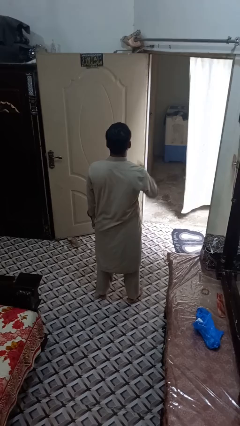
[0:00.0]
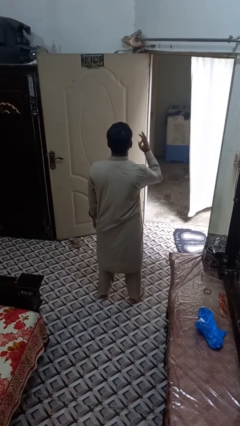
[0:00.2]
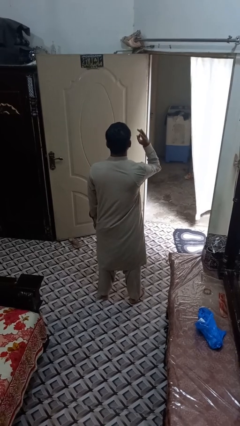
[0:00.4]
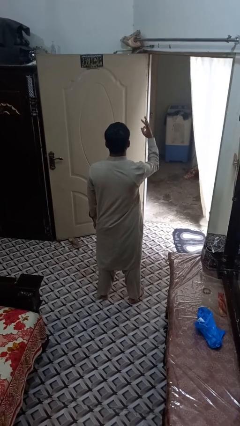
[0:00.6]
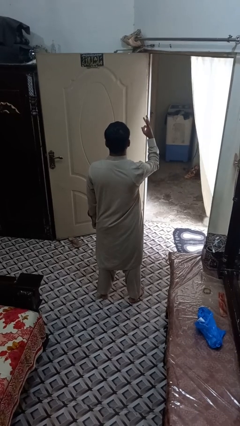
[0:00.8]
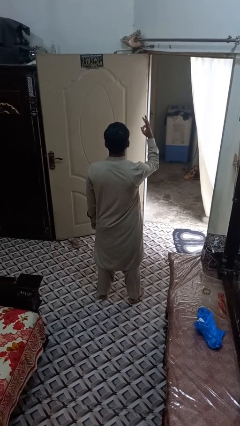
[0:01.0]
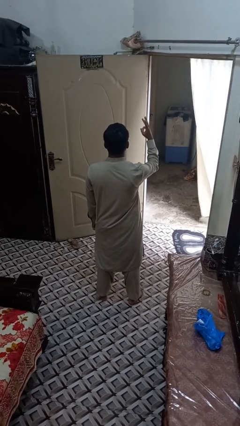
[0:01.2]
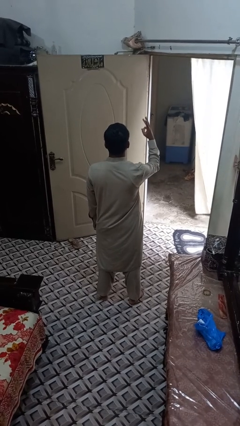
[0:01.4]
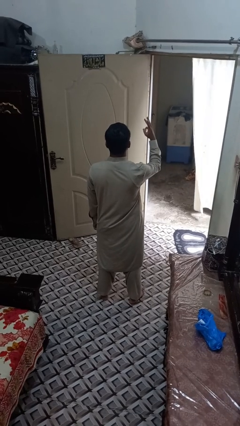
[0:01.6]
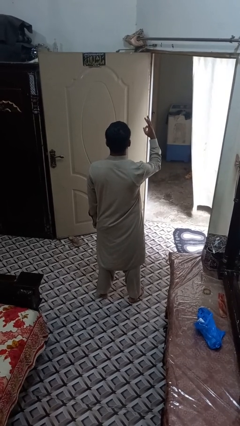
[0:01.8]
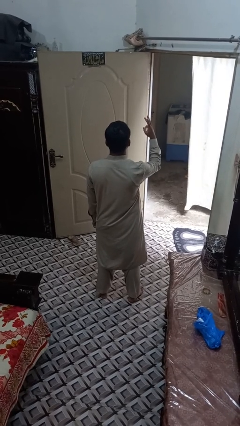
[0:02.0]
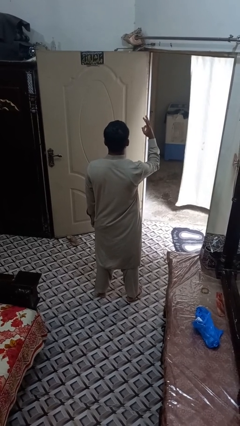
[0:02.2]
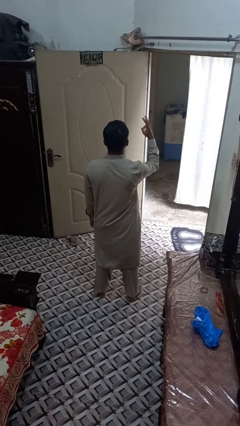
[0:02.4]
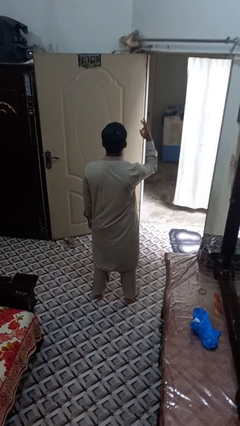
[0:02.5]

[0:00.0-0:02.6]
person gestures number three

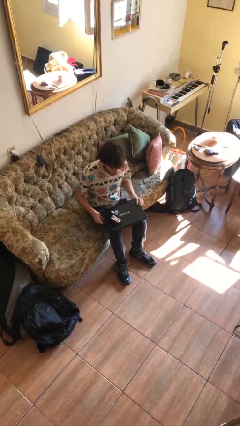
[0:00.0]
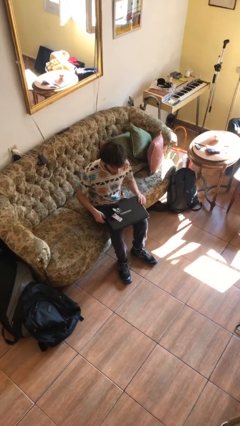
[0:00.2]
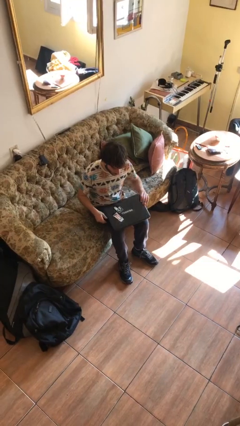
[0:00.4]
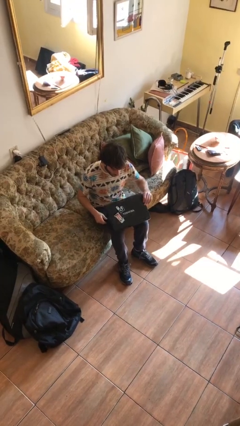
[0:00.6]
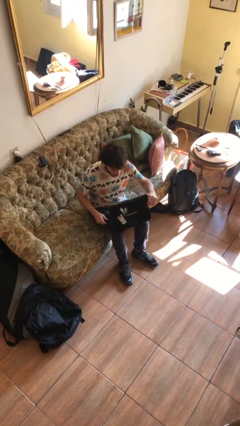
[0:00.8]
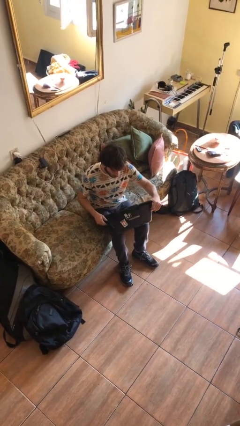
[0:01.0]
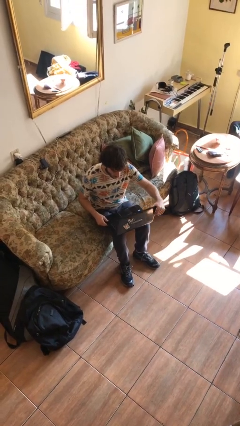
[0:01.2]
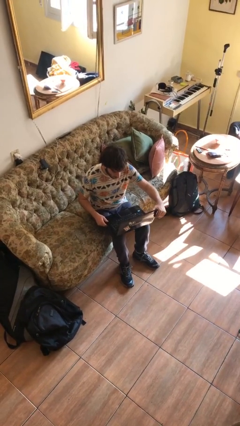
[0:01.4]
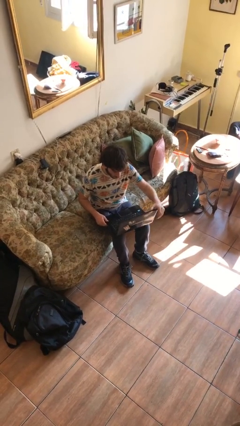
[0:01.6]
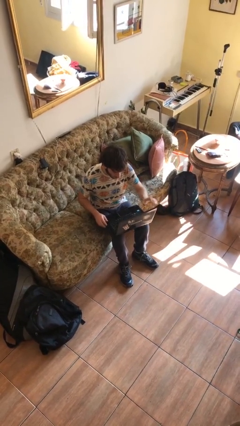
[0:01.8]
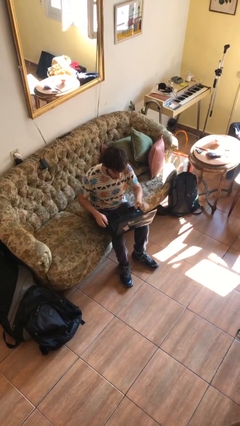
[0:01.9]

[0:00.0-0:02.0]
person opens laptop

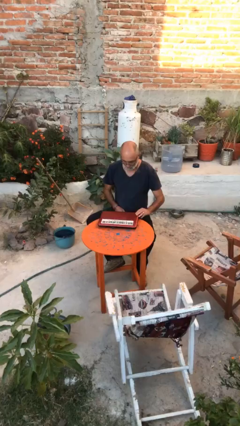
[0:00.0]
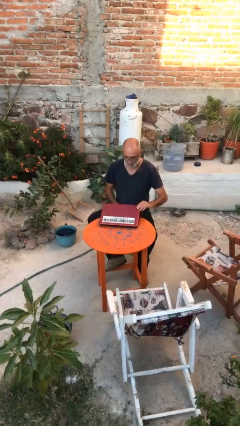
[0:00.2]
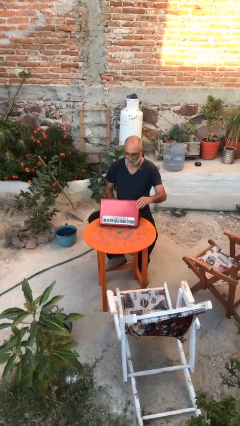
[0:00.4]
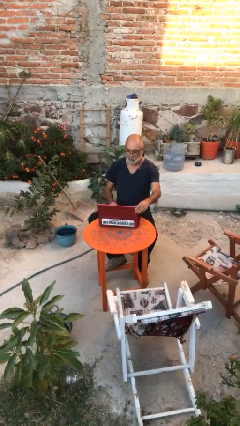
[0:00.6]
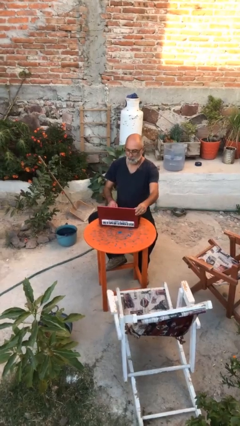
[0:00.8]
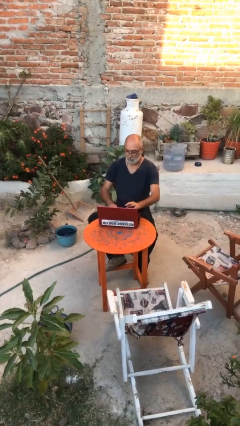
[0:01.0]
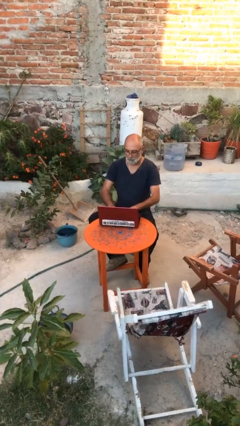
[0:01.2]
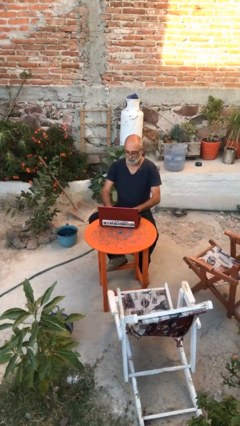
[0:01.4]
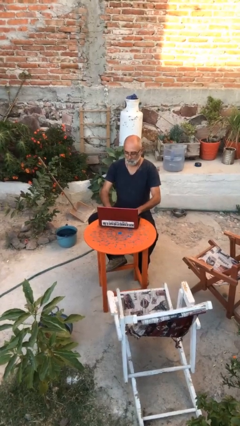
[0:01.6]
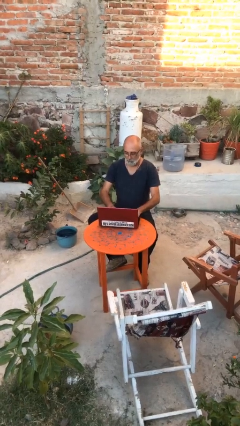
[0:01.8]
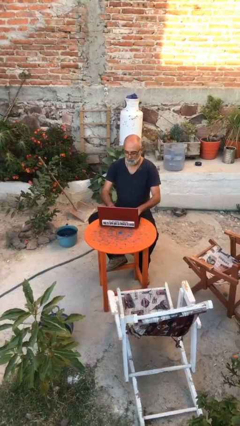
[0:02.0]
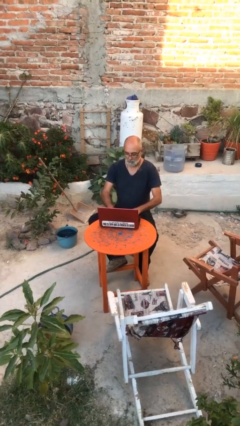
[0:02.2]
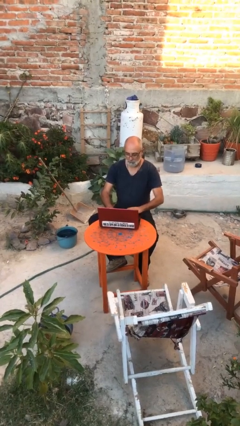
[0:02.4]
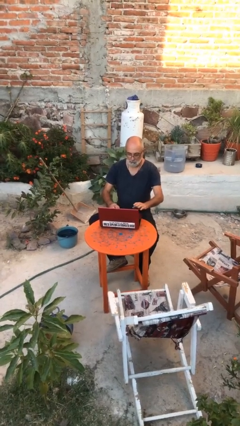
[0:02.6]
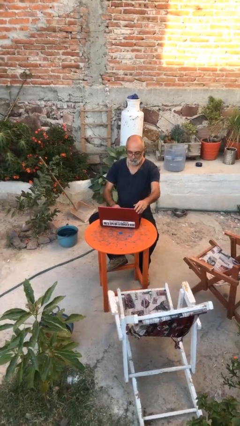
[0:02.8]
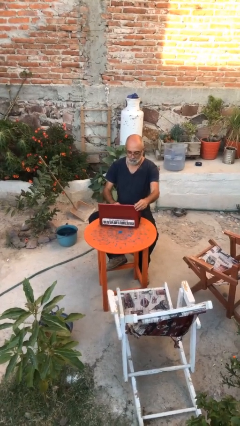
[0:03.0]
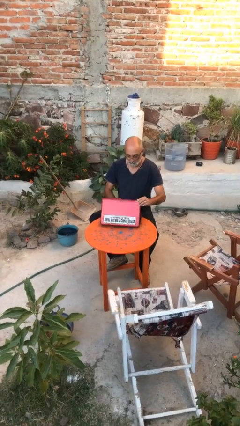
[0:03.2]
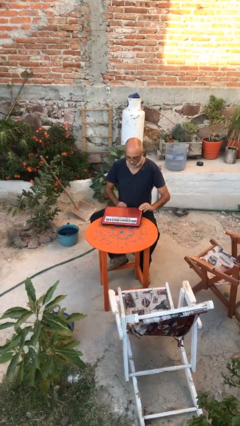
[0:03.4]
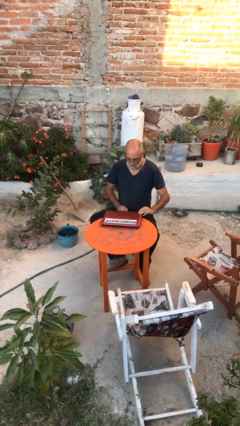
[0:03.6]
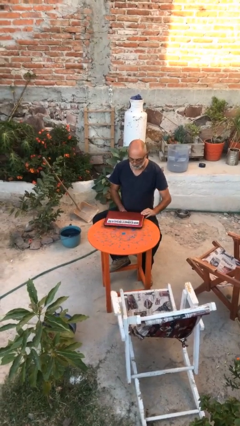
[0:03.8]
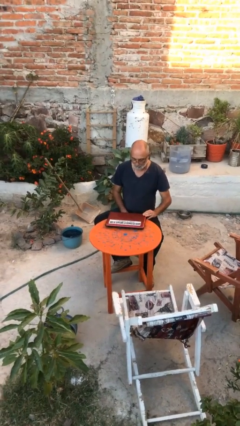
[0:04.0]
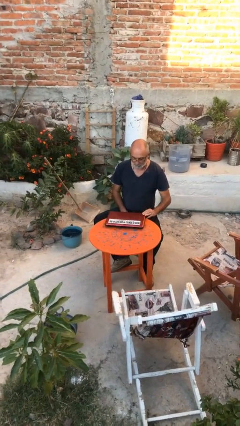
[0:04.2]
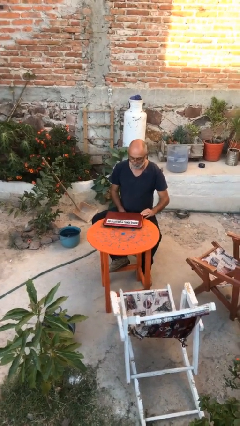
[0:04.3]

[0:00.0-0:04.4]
person interacts with laptop

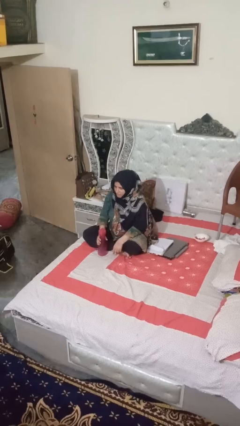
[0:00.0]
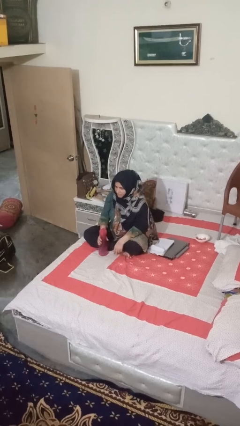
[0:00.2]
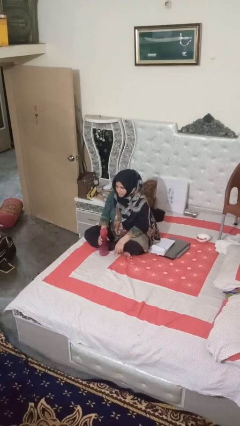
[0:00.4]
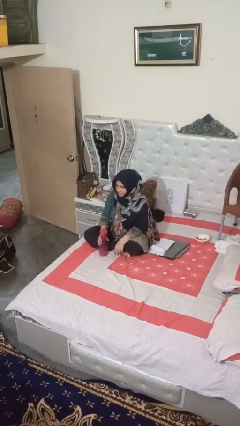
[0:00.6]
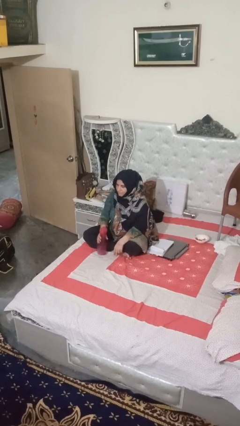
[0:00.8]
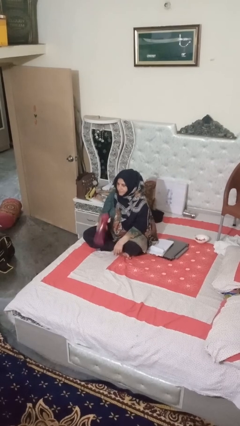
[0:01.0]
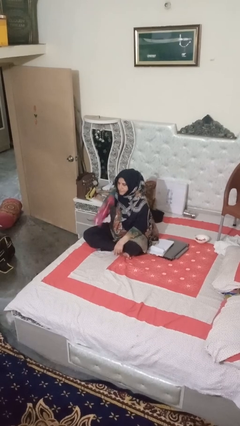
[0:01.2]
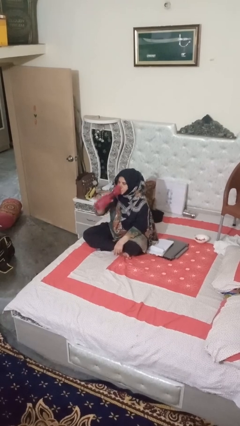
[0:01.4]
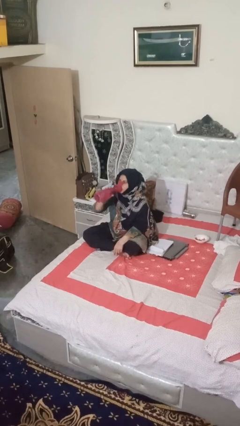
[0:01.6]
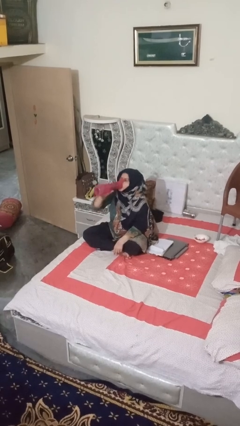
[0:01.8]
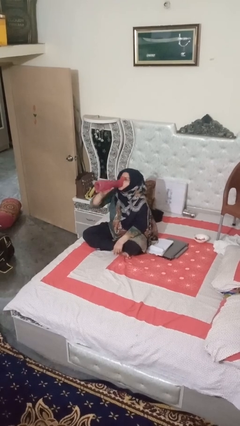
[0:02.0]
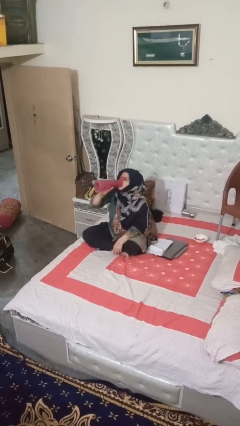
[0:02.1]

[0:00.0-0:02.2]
person drinks from bottle

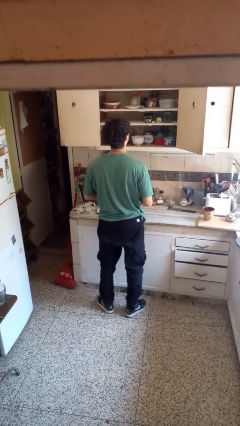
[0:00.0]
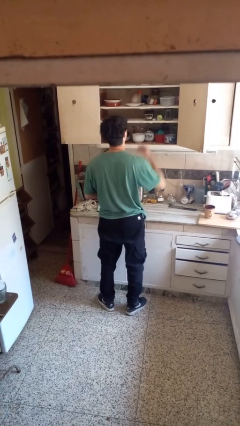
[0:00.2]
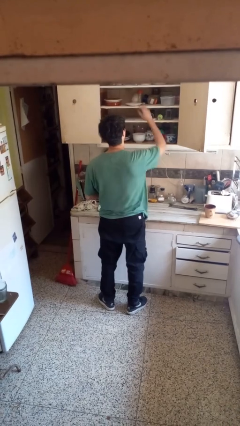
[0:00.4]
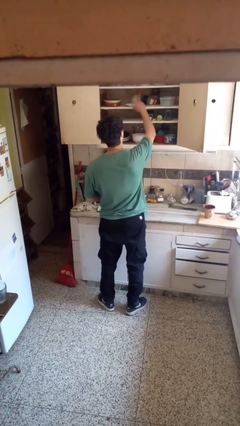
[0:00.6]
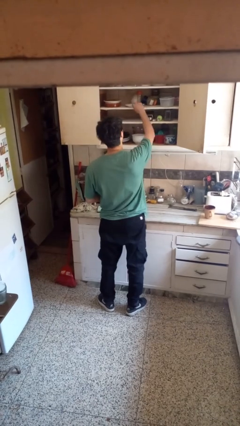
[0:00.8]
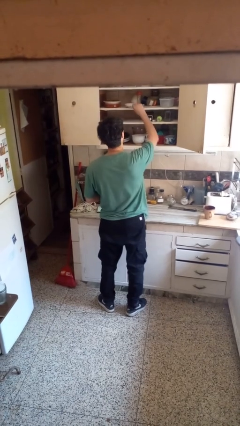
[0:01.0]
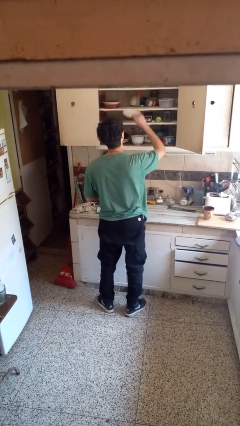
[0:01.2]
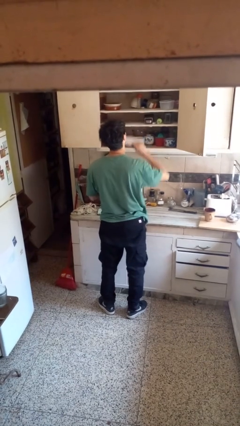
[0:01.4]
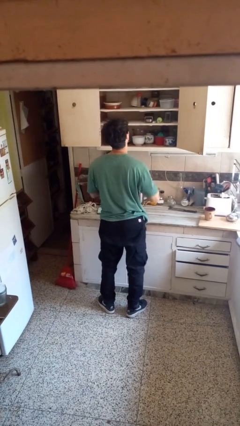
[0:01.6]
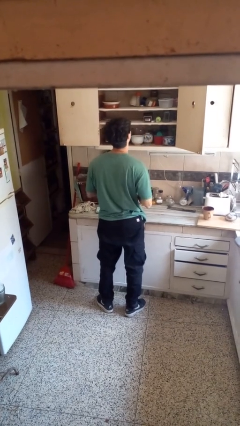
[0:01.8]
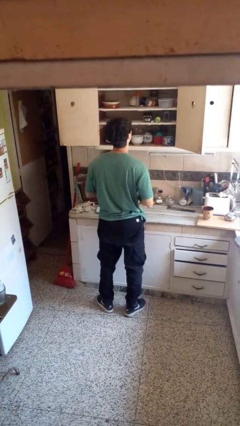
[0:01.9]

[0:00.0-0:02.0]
person takes object from cabinet

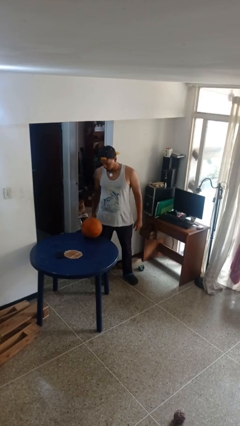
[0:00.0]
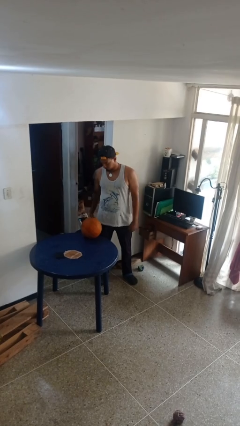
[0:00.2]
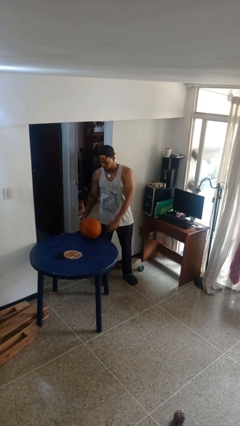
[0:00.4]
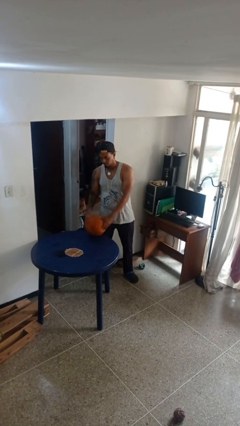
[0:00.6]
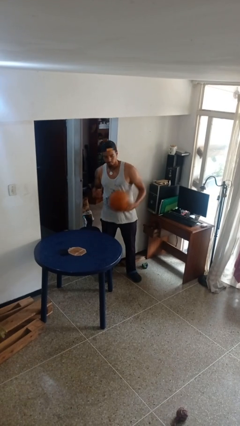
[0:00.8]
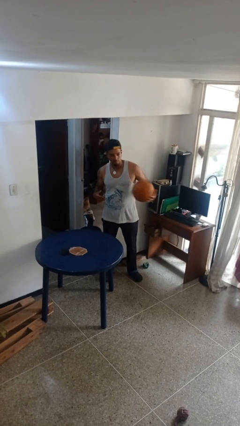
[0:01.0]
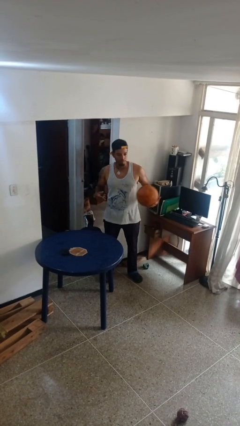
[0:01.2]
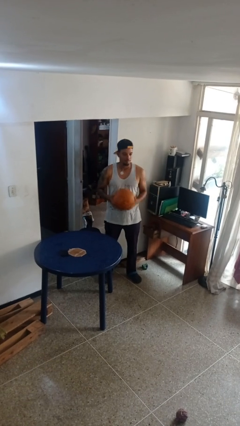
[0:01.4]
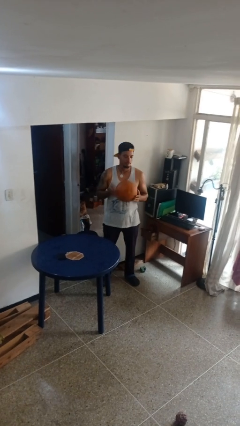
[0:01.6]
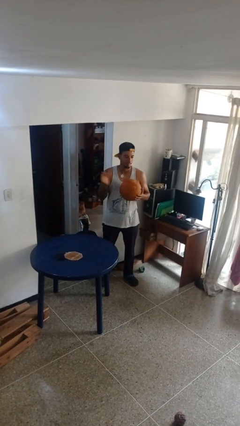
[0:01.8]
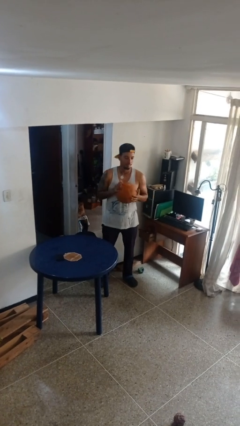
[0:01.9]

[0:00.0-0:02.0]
person picks up object from table

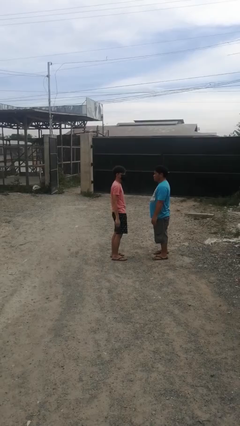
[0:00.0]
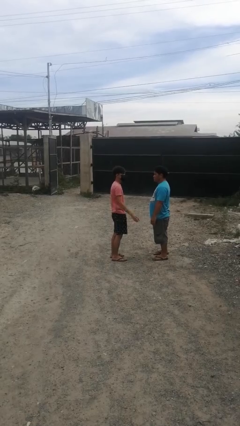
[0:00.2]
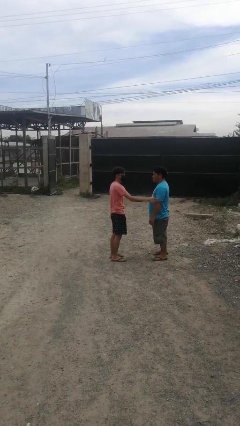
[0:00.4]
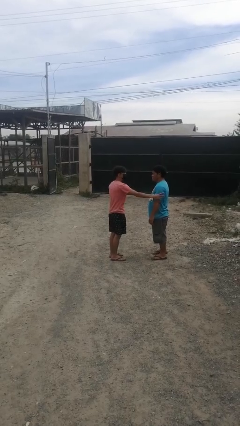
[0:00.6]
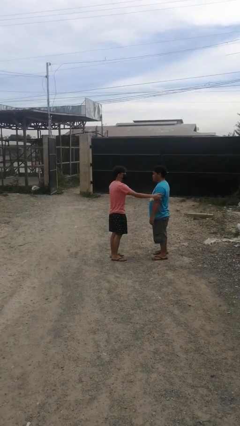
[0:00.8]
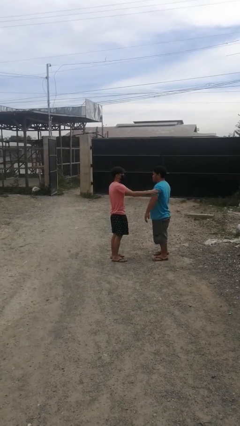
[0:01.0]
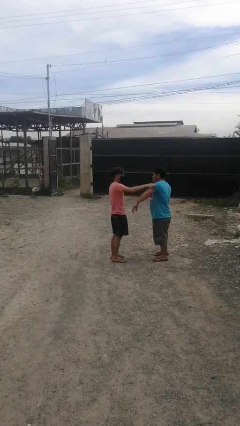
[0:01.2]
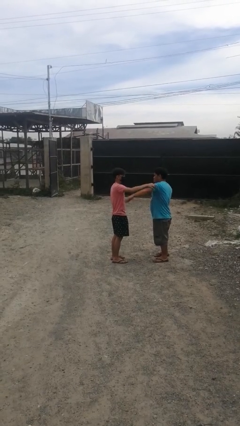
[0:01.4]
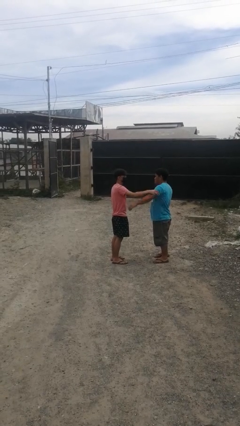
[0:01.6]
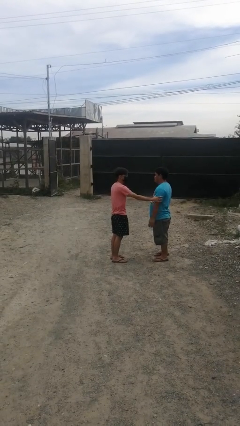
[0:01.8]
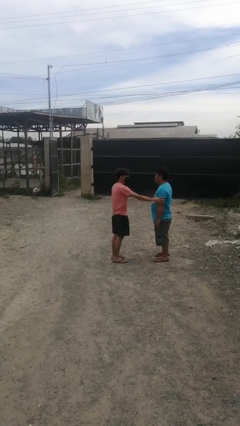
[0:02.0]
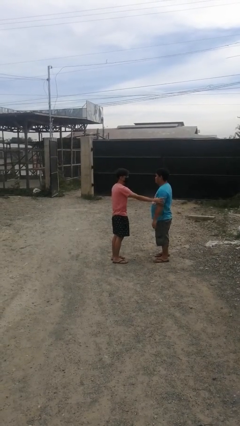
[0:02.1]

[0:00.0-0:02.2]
person grabs person by bicep
